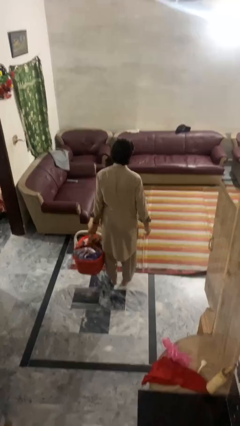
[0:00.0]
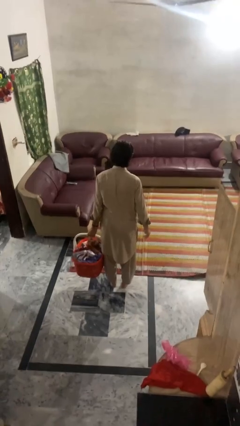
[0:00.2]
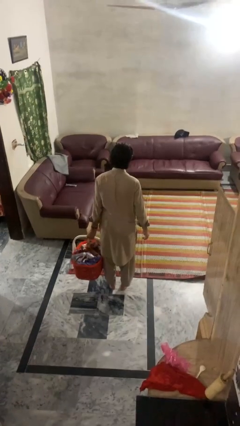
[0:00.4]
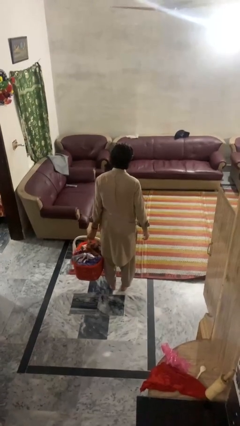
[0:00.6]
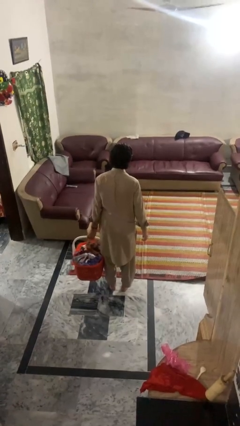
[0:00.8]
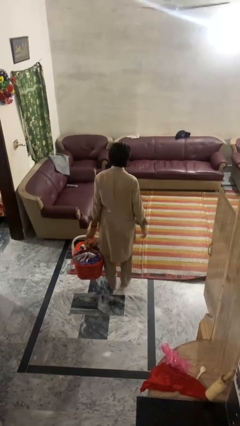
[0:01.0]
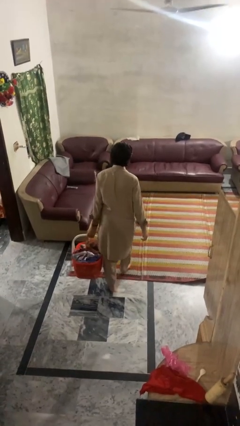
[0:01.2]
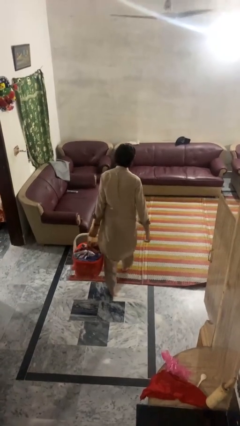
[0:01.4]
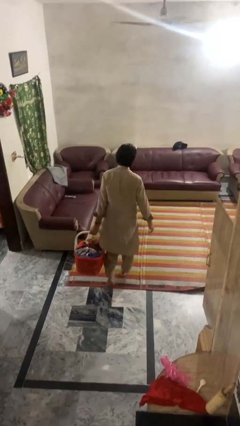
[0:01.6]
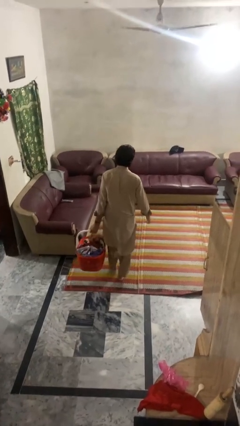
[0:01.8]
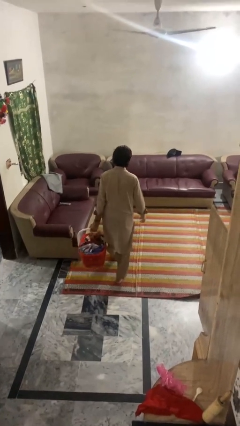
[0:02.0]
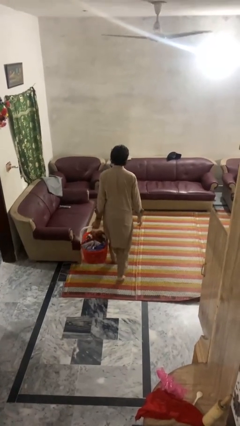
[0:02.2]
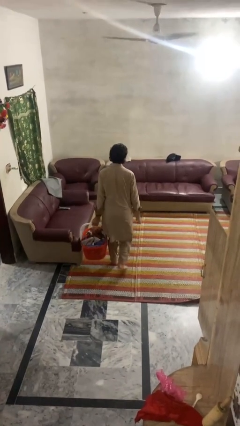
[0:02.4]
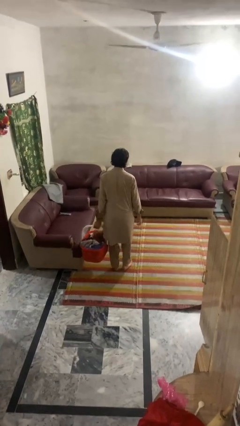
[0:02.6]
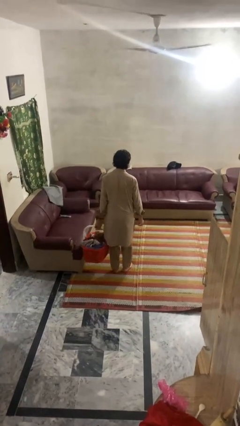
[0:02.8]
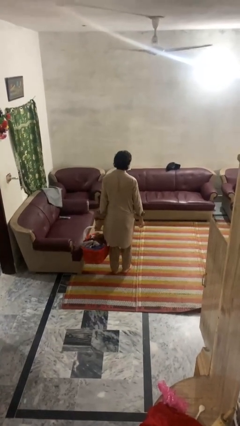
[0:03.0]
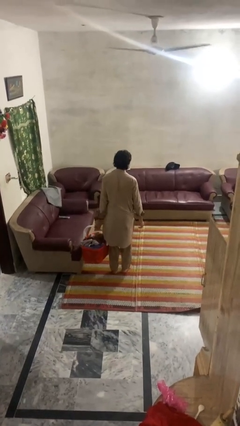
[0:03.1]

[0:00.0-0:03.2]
person carries laundry basket

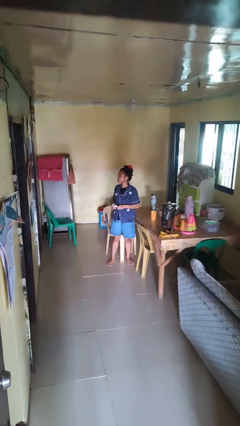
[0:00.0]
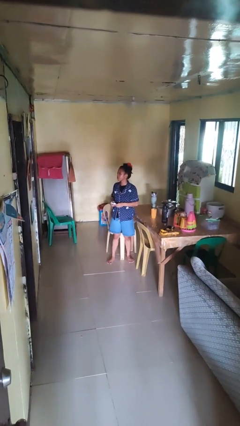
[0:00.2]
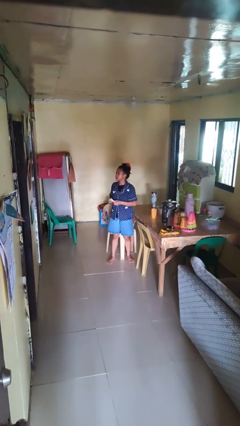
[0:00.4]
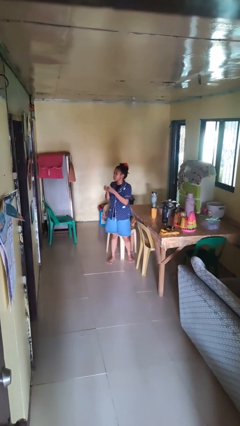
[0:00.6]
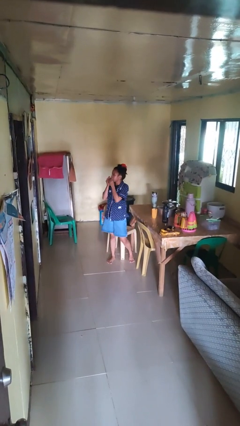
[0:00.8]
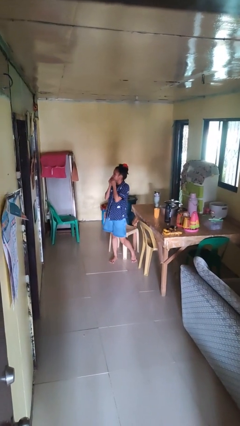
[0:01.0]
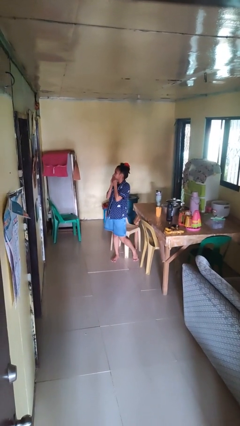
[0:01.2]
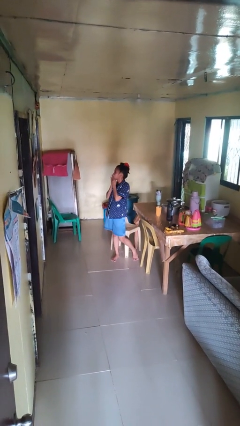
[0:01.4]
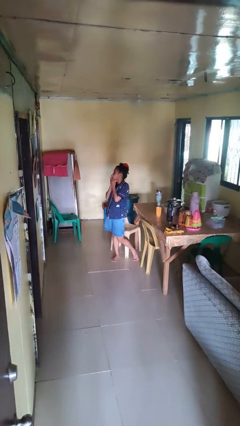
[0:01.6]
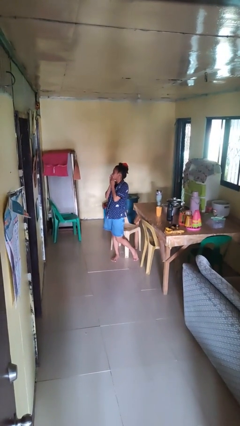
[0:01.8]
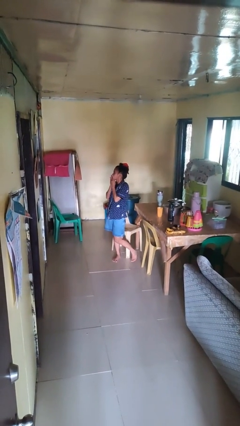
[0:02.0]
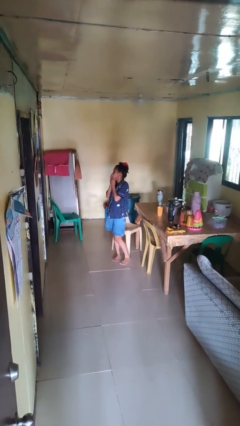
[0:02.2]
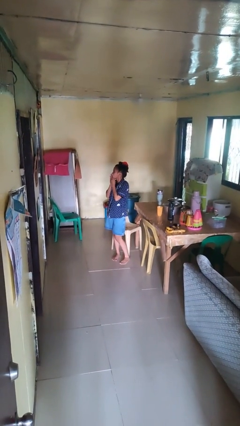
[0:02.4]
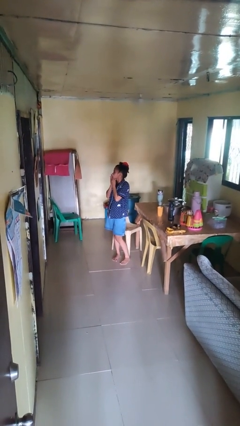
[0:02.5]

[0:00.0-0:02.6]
person wipes mouth with napkin

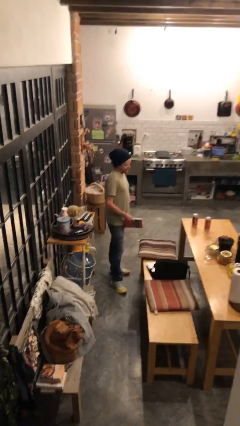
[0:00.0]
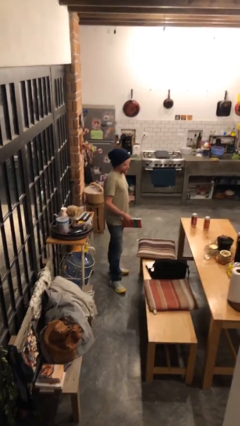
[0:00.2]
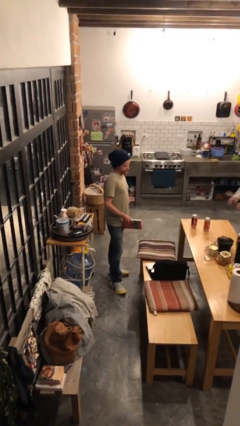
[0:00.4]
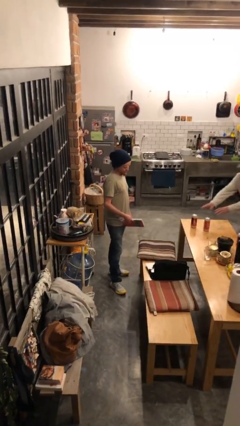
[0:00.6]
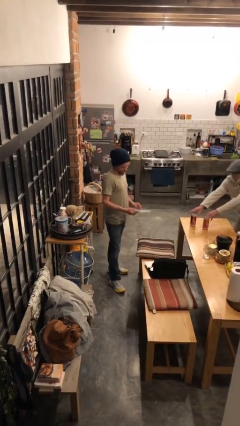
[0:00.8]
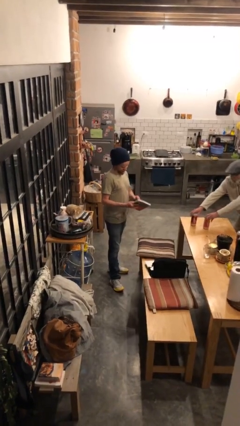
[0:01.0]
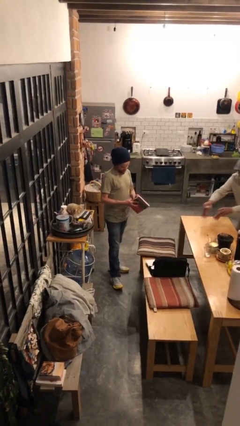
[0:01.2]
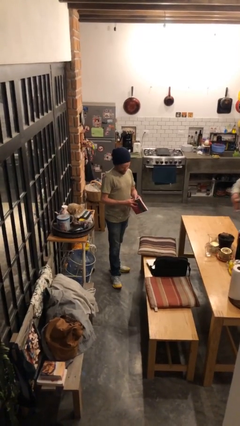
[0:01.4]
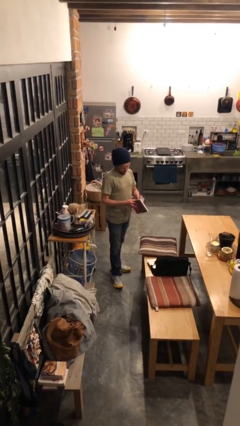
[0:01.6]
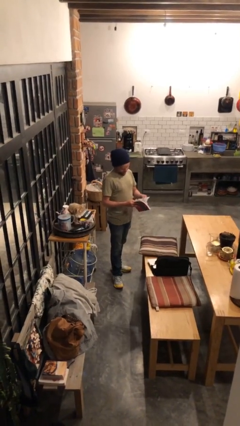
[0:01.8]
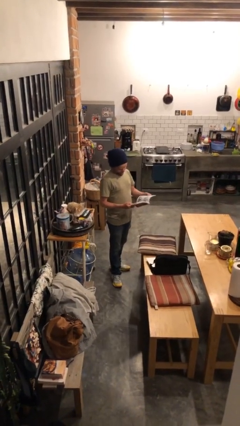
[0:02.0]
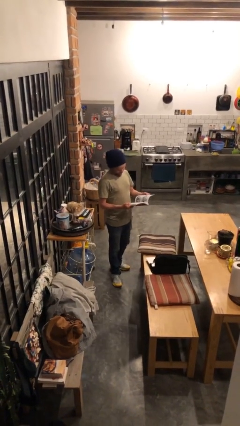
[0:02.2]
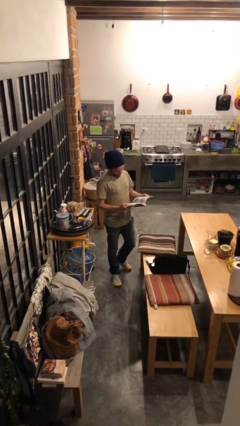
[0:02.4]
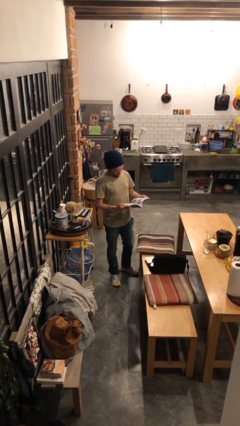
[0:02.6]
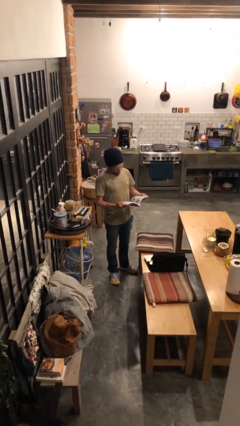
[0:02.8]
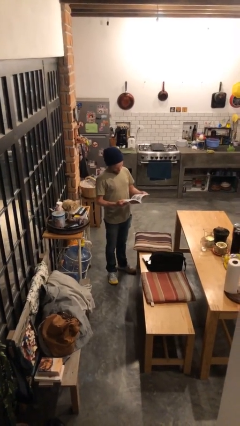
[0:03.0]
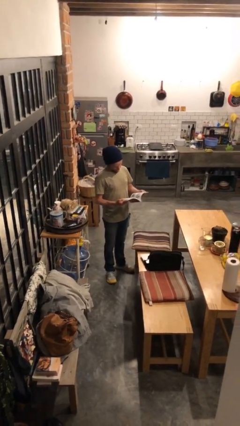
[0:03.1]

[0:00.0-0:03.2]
person reads document

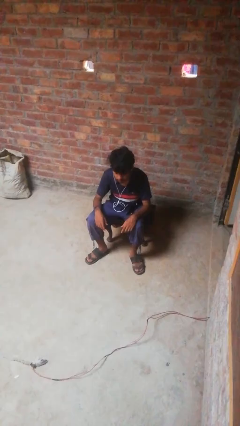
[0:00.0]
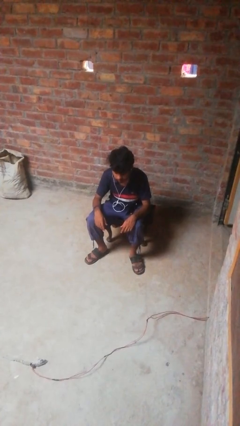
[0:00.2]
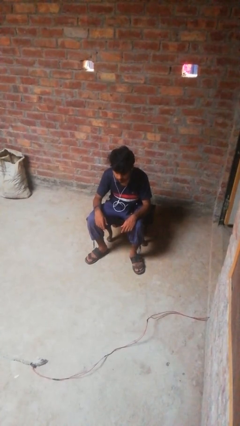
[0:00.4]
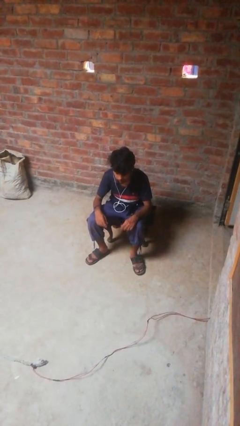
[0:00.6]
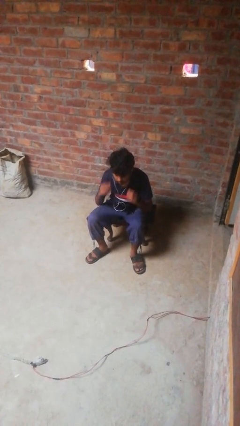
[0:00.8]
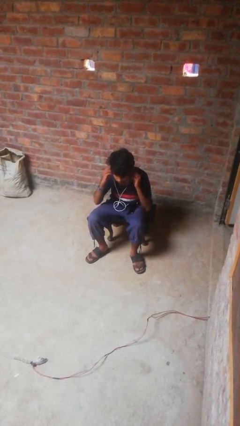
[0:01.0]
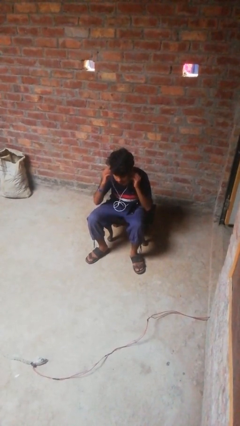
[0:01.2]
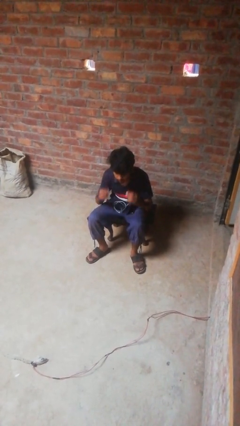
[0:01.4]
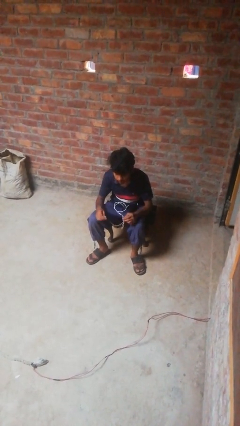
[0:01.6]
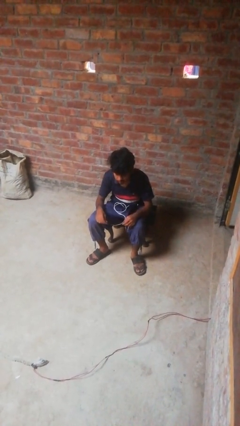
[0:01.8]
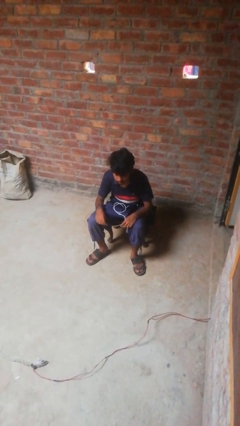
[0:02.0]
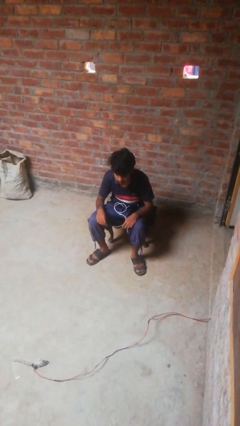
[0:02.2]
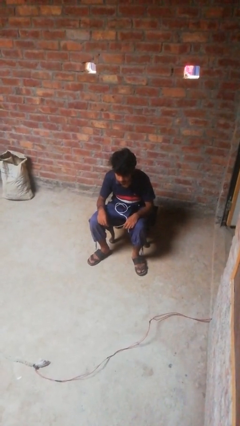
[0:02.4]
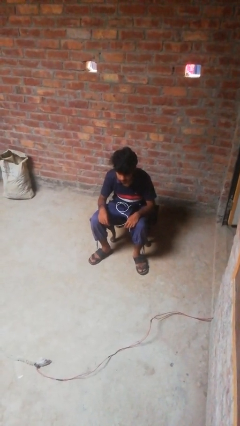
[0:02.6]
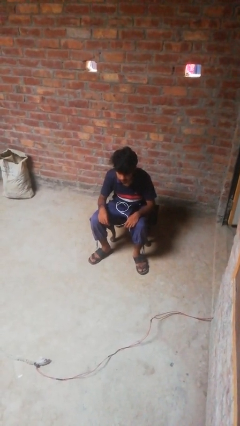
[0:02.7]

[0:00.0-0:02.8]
person takes off headphones

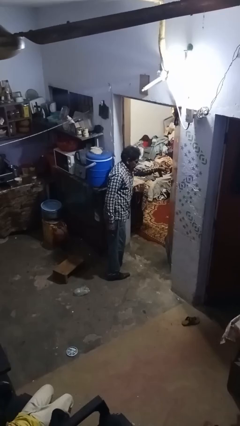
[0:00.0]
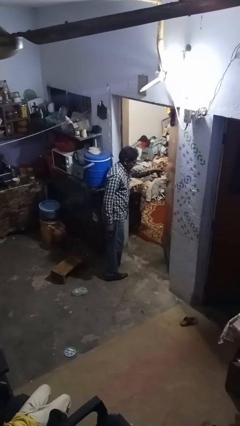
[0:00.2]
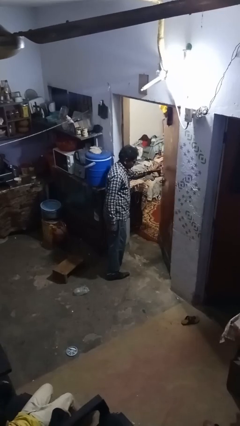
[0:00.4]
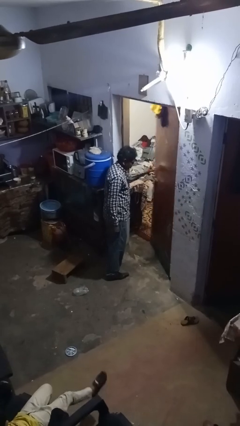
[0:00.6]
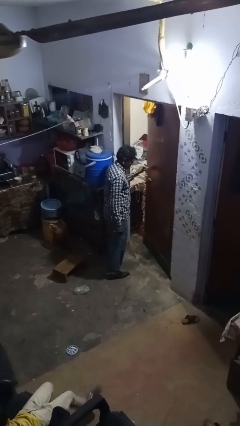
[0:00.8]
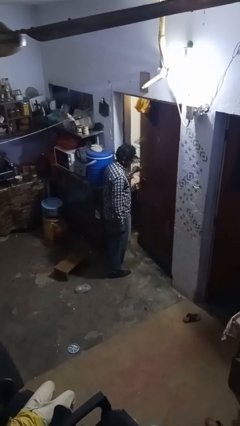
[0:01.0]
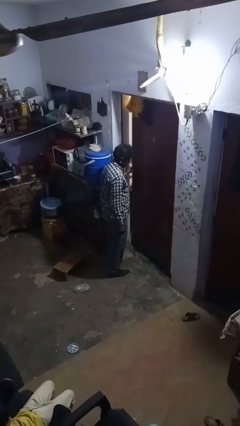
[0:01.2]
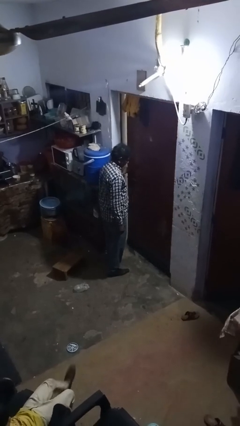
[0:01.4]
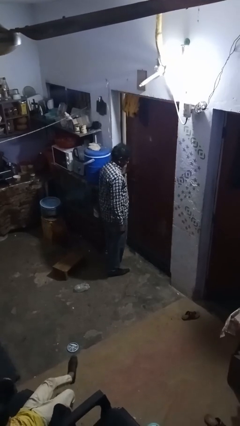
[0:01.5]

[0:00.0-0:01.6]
person closes facility door

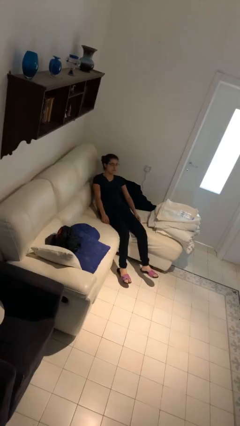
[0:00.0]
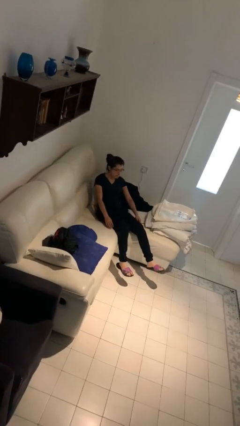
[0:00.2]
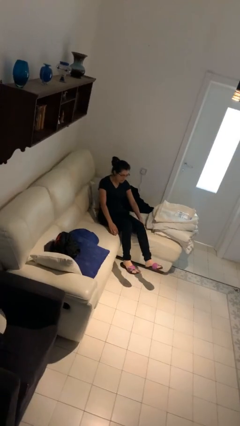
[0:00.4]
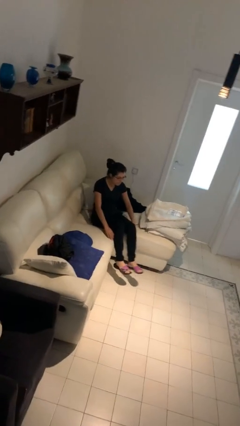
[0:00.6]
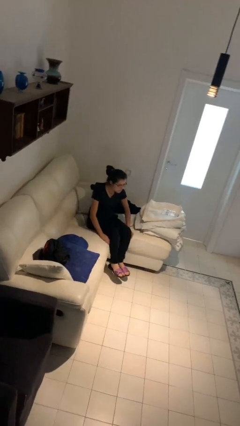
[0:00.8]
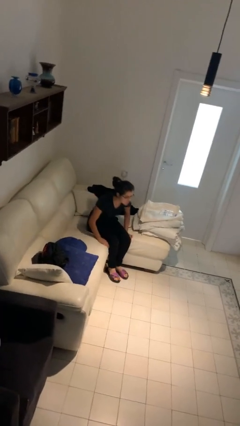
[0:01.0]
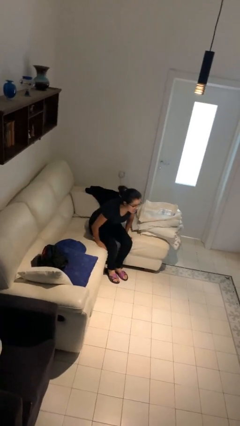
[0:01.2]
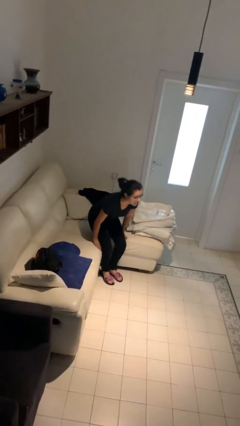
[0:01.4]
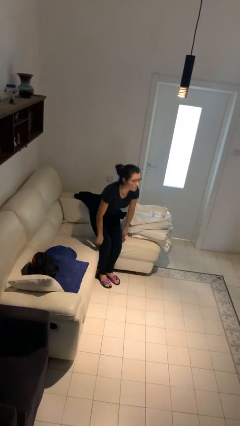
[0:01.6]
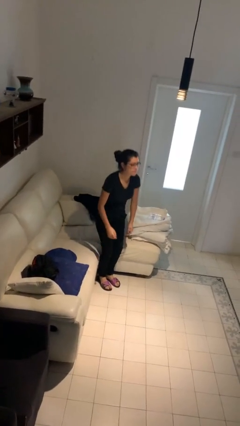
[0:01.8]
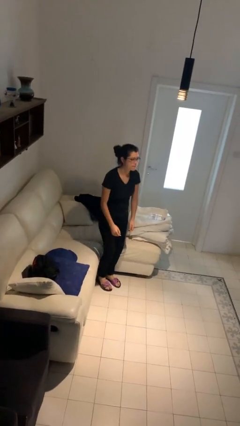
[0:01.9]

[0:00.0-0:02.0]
person stands up

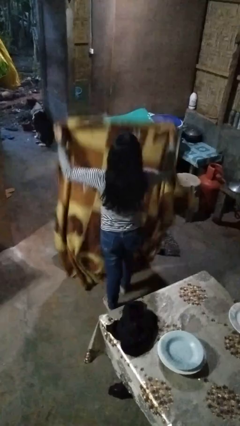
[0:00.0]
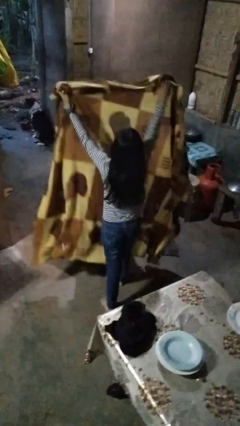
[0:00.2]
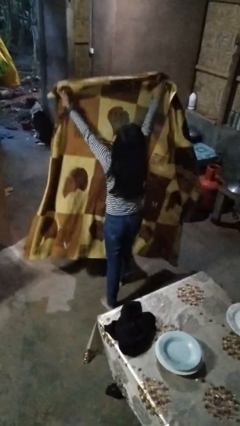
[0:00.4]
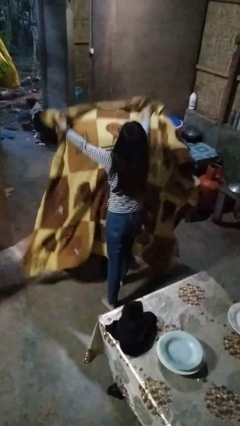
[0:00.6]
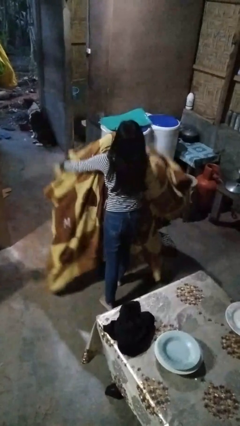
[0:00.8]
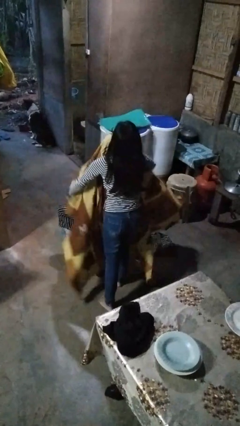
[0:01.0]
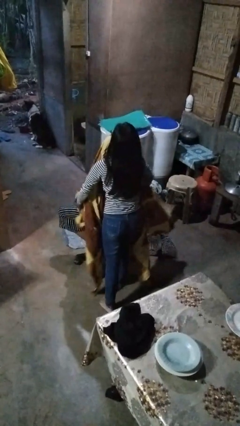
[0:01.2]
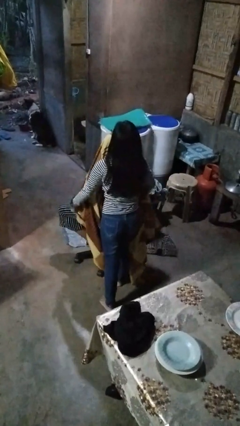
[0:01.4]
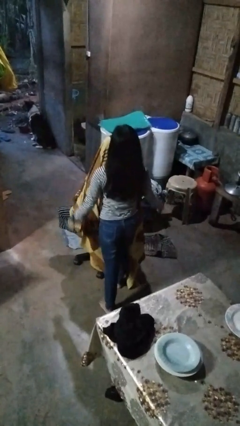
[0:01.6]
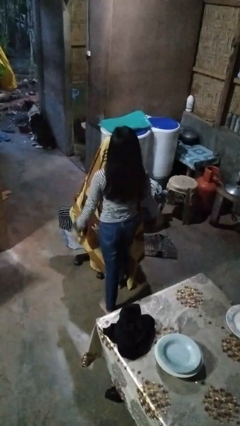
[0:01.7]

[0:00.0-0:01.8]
person covers friend with blanket
